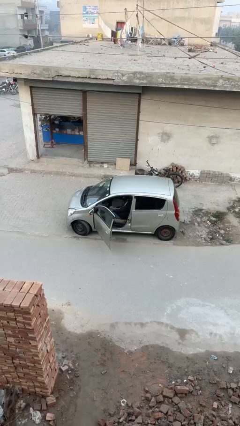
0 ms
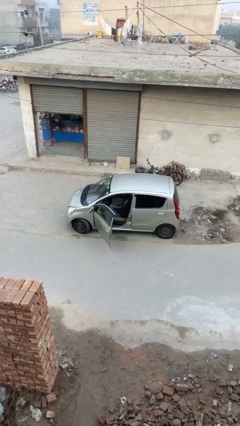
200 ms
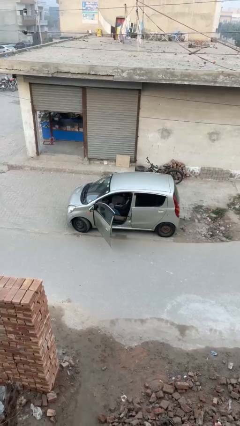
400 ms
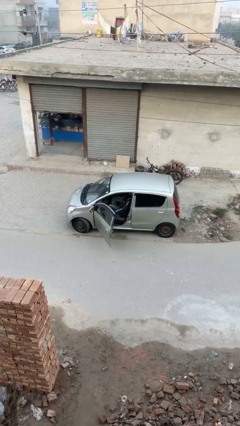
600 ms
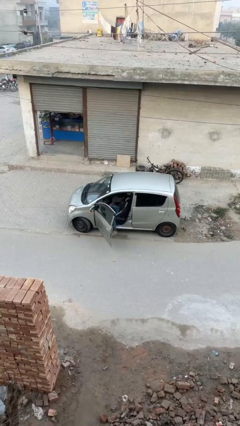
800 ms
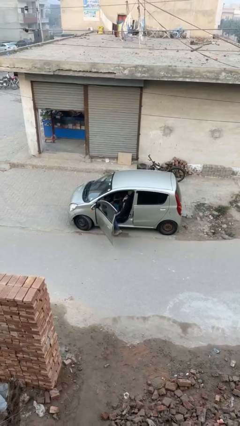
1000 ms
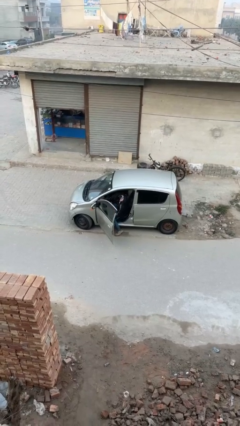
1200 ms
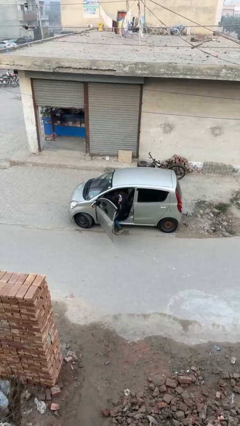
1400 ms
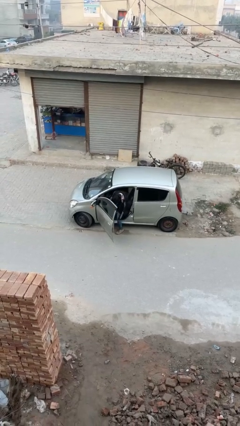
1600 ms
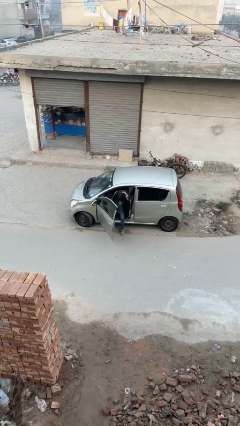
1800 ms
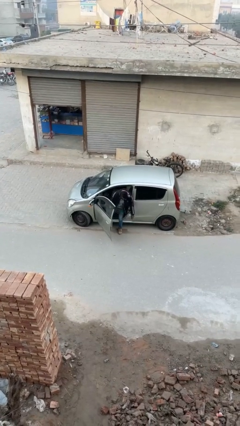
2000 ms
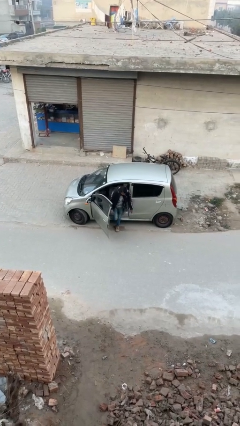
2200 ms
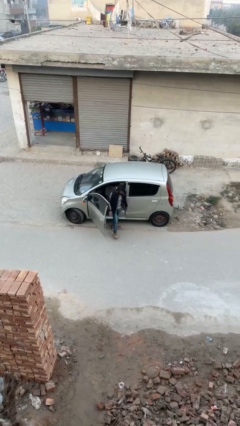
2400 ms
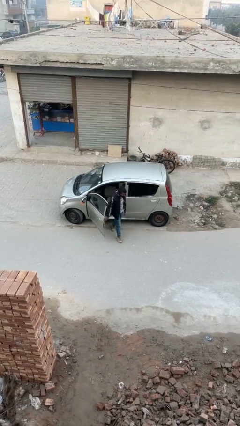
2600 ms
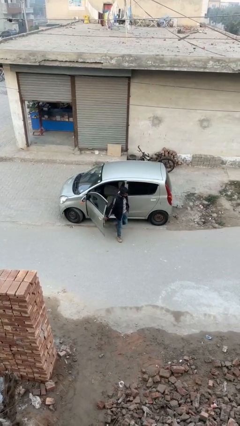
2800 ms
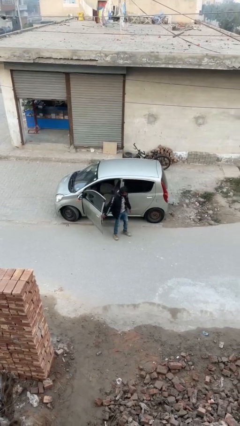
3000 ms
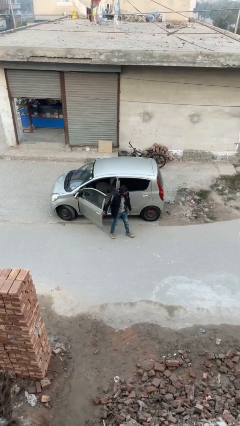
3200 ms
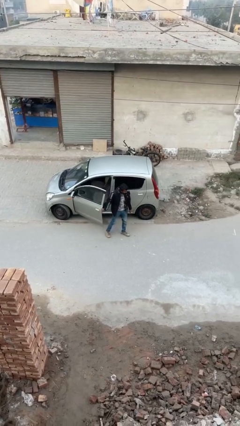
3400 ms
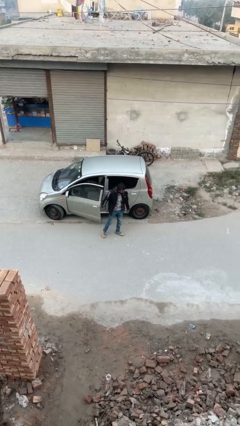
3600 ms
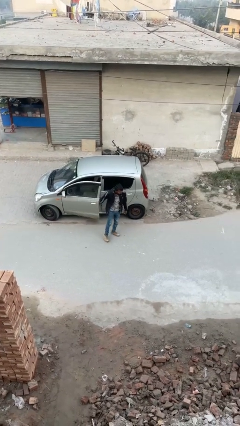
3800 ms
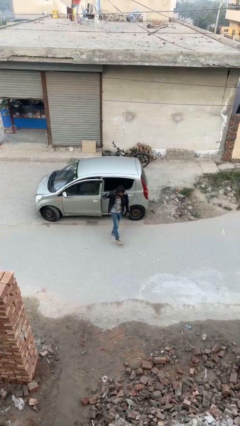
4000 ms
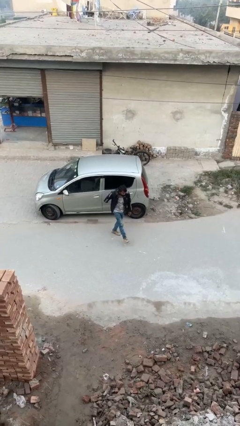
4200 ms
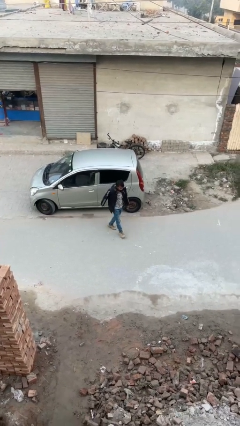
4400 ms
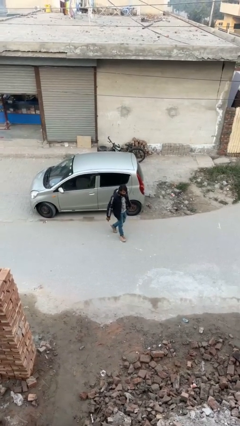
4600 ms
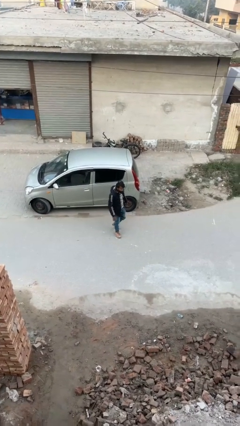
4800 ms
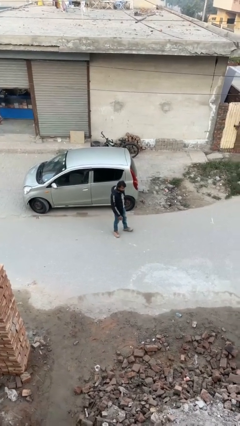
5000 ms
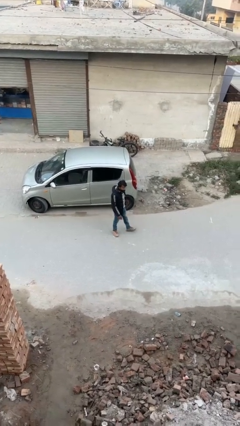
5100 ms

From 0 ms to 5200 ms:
person exits car

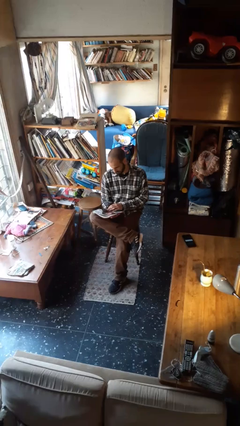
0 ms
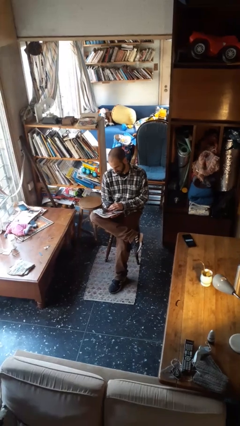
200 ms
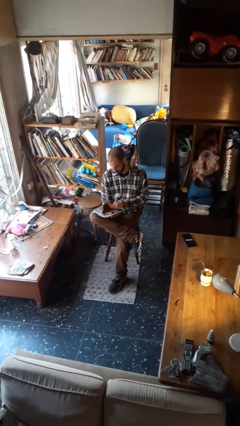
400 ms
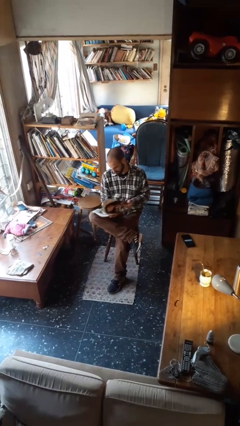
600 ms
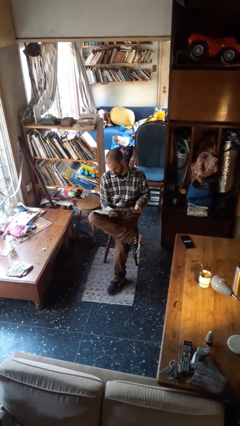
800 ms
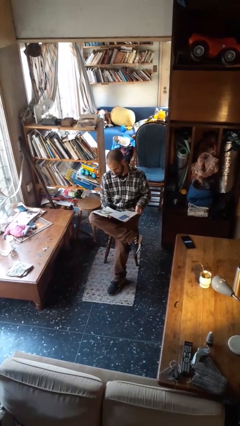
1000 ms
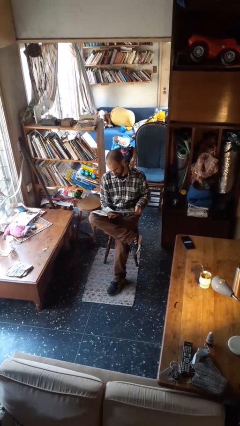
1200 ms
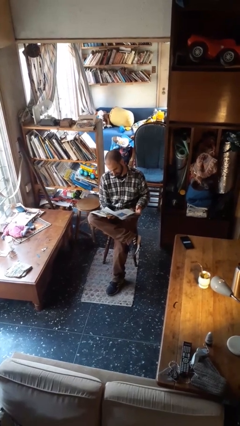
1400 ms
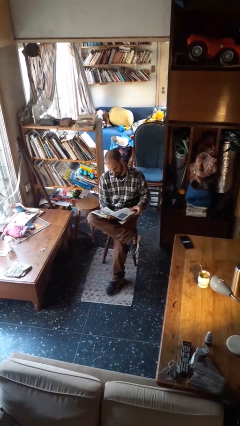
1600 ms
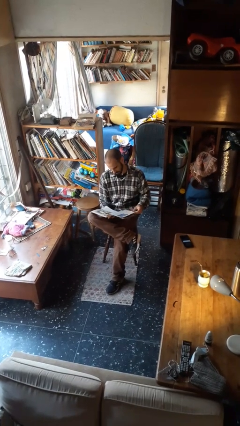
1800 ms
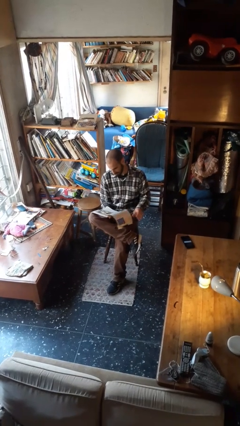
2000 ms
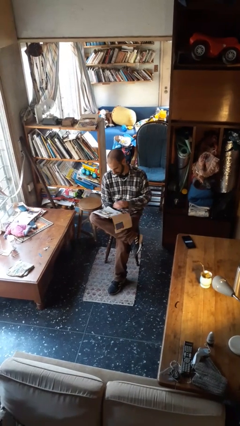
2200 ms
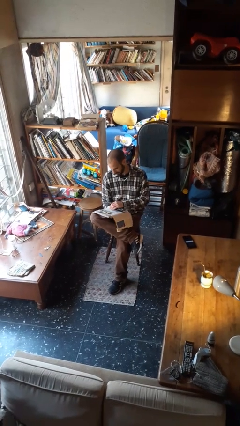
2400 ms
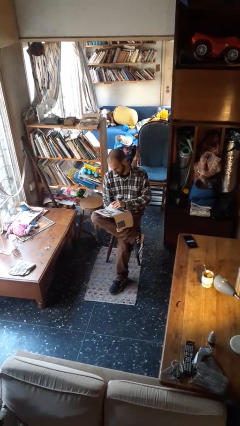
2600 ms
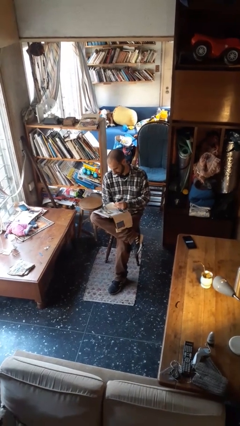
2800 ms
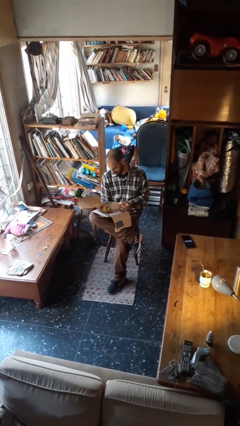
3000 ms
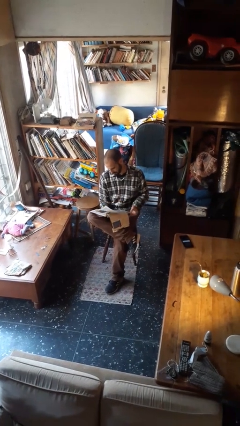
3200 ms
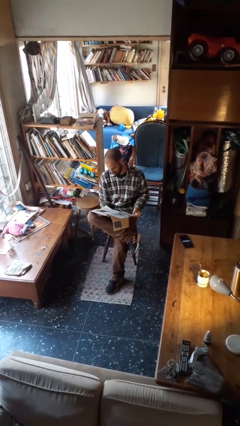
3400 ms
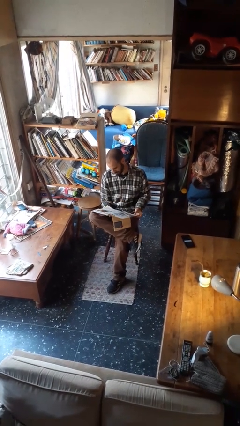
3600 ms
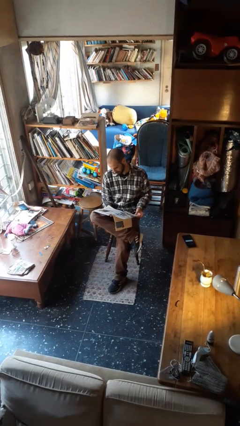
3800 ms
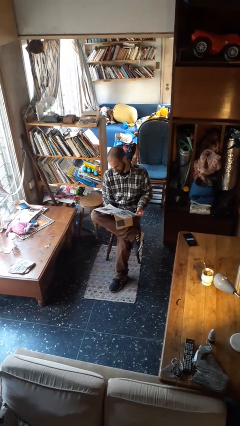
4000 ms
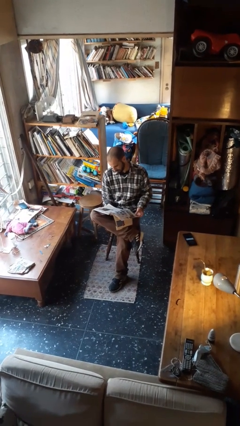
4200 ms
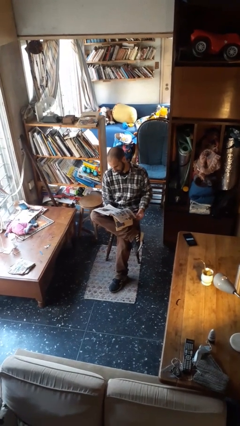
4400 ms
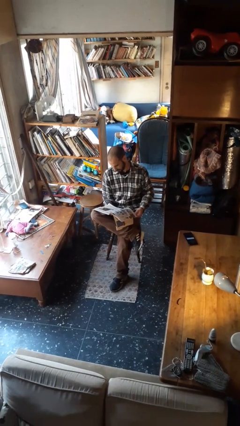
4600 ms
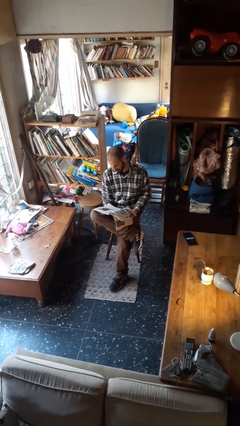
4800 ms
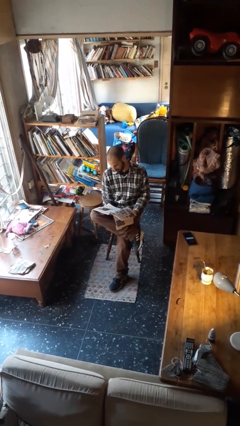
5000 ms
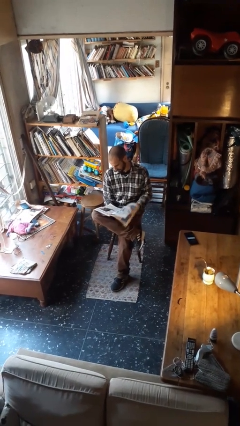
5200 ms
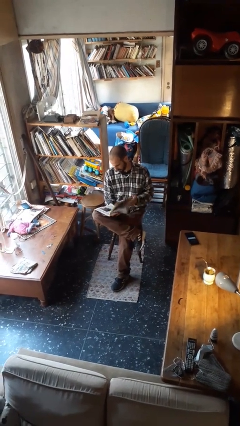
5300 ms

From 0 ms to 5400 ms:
person reads magazine

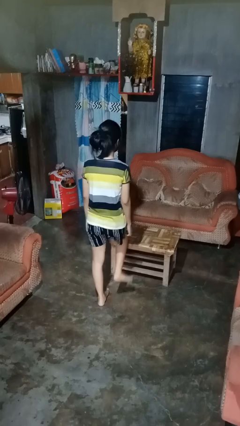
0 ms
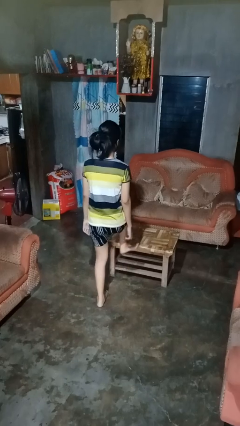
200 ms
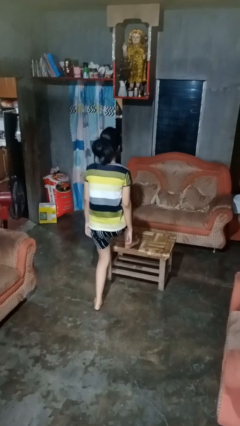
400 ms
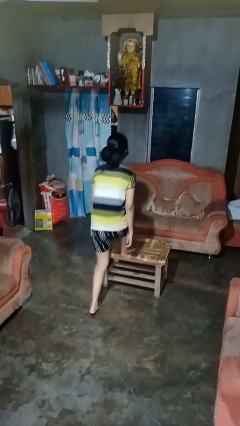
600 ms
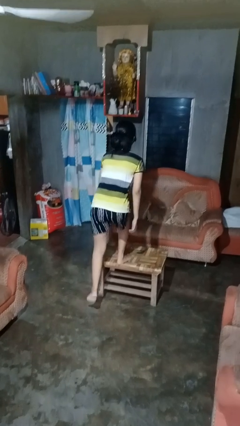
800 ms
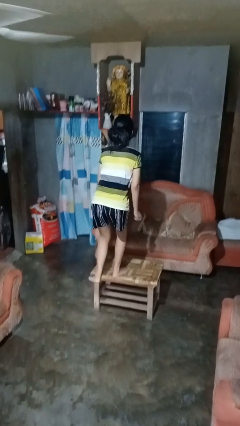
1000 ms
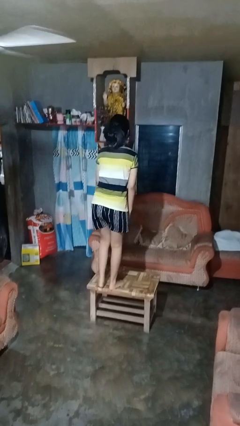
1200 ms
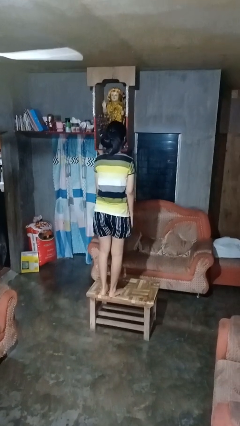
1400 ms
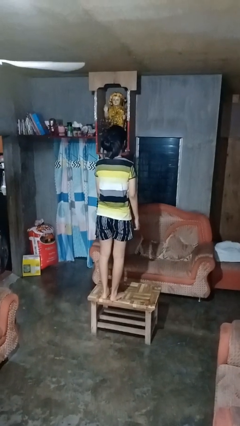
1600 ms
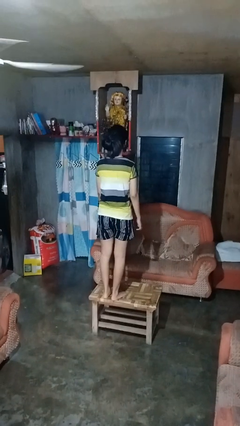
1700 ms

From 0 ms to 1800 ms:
person climbs on table

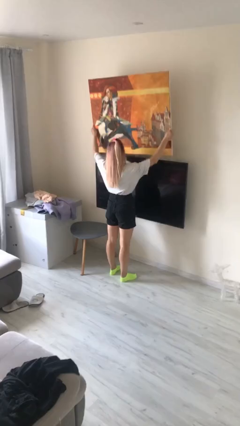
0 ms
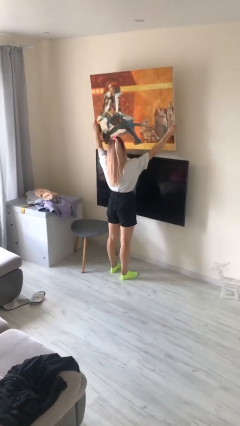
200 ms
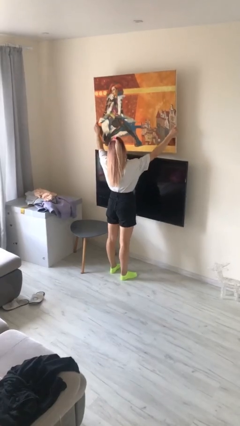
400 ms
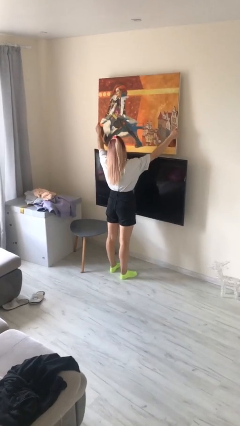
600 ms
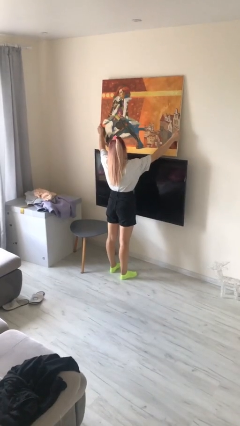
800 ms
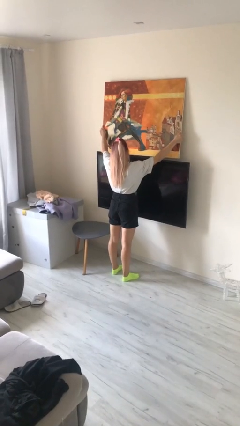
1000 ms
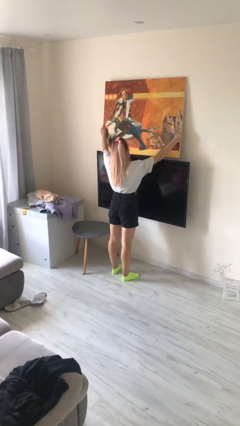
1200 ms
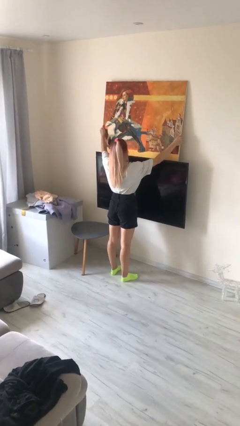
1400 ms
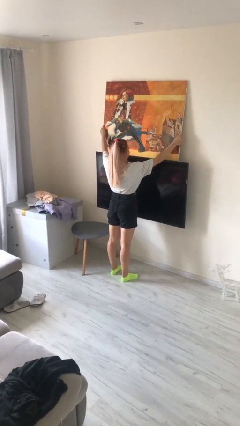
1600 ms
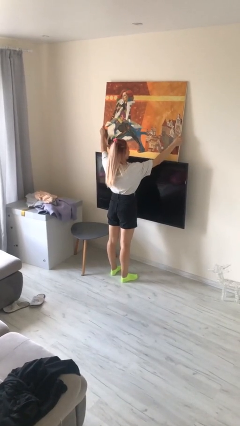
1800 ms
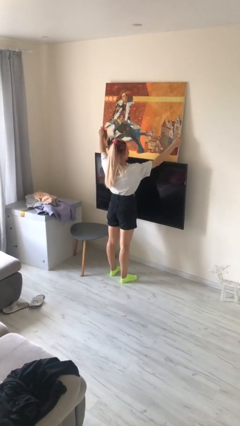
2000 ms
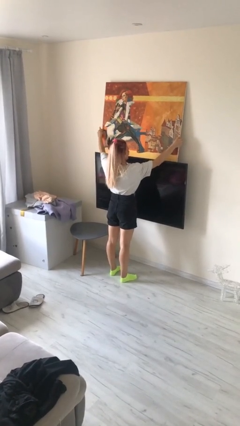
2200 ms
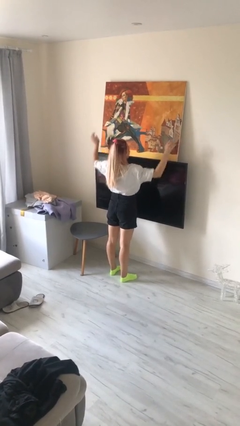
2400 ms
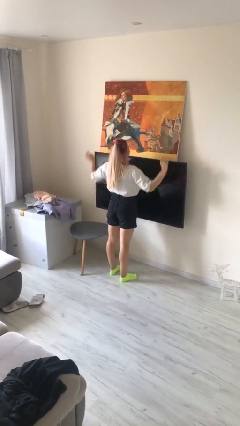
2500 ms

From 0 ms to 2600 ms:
person puts up picture frame

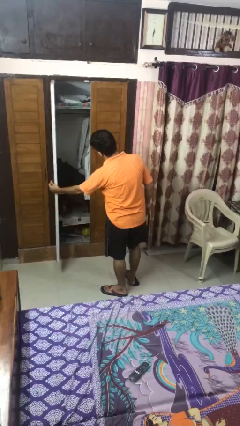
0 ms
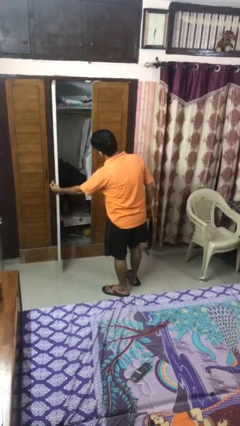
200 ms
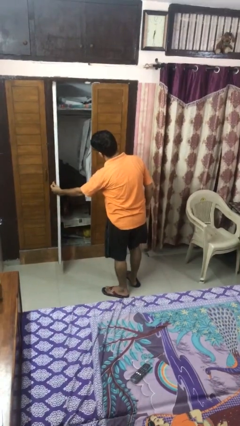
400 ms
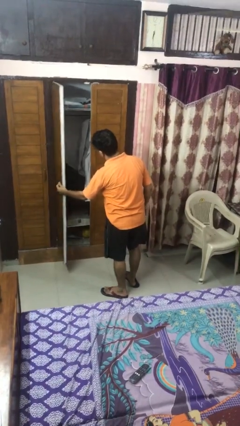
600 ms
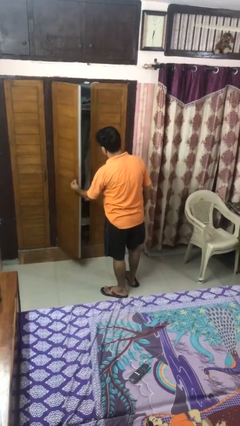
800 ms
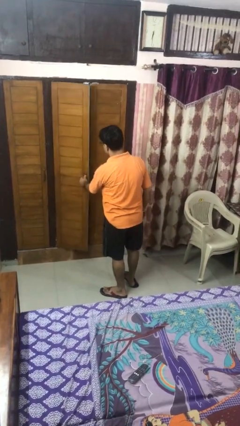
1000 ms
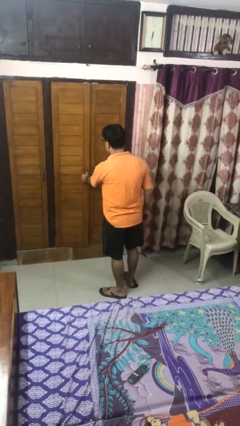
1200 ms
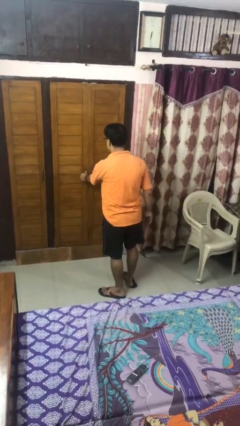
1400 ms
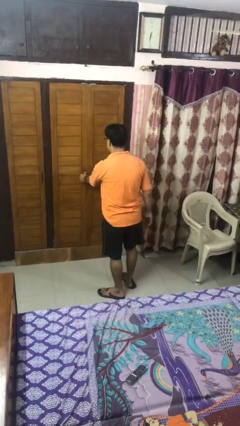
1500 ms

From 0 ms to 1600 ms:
person closes closet door

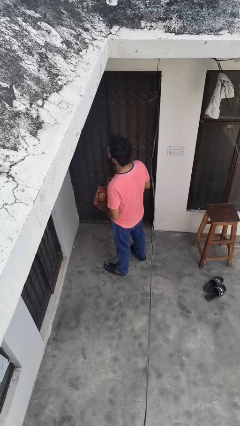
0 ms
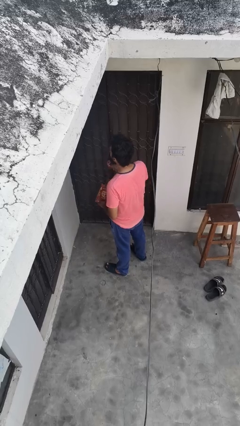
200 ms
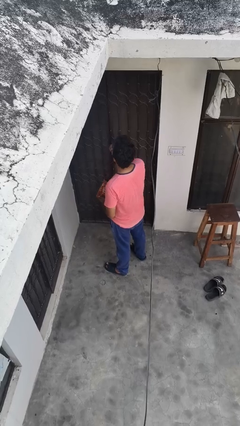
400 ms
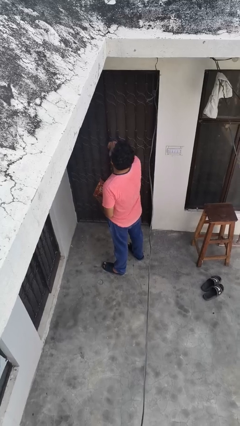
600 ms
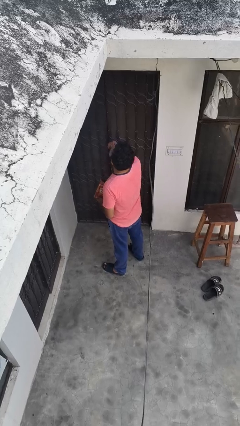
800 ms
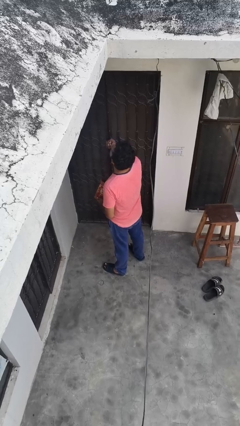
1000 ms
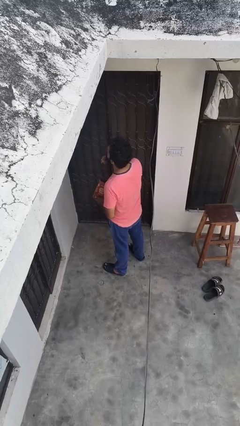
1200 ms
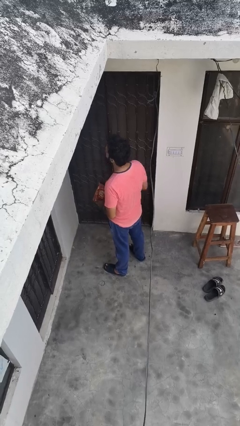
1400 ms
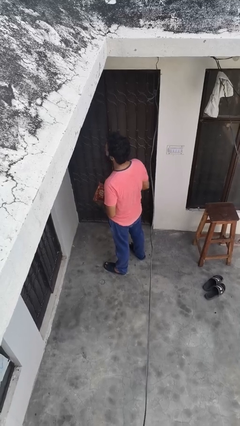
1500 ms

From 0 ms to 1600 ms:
person eats snack from bag
